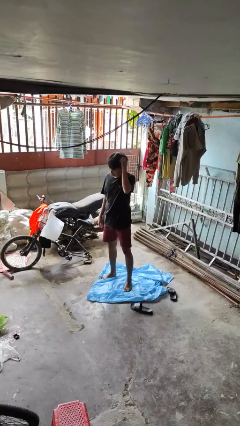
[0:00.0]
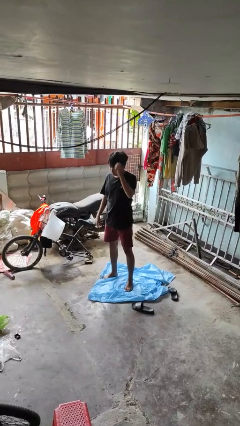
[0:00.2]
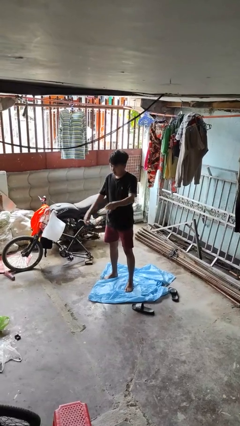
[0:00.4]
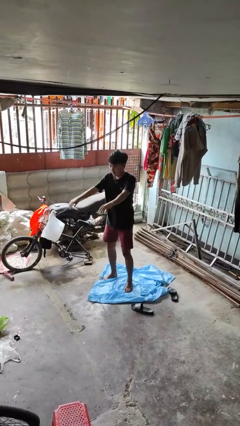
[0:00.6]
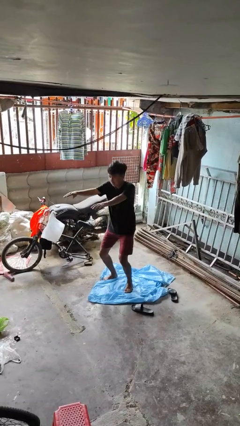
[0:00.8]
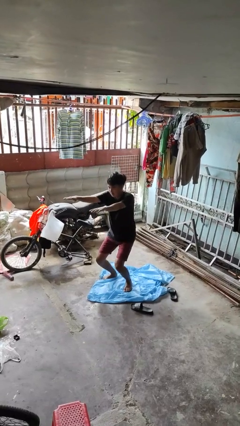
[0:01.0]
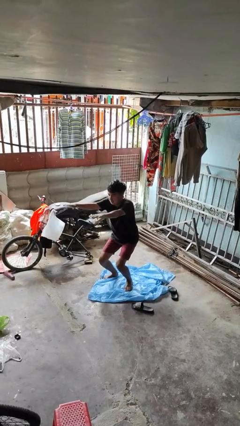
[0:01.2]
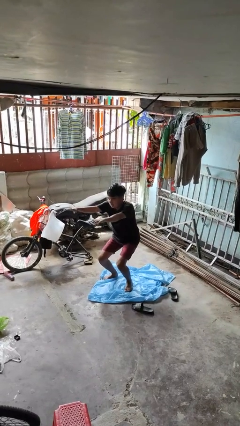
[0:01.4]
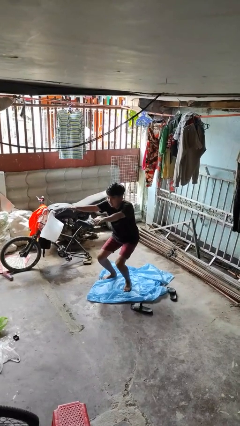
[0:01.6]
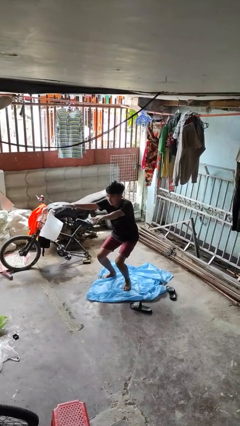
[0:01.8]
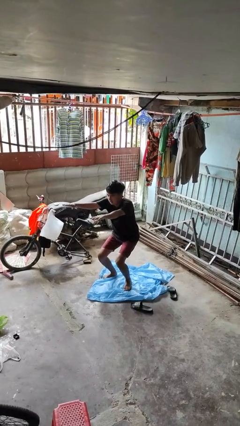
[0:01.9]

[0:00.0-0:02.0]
person squats

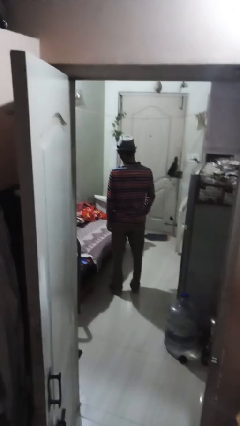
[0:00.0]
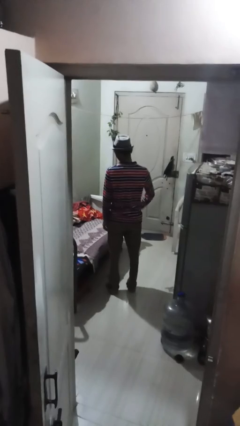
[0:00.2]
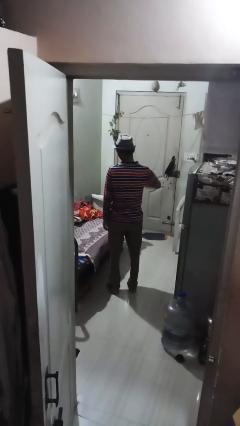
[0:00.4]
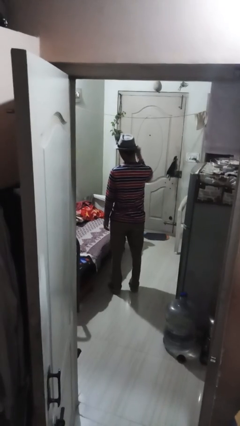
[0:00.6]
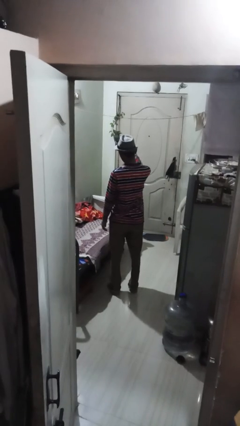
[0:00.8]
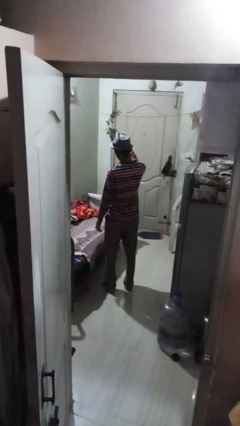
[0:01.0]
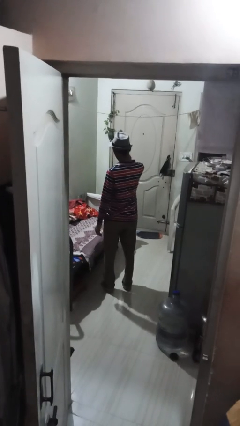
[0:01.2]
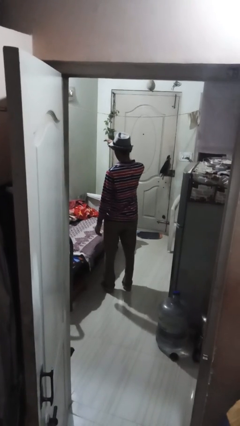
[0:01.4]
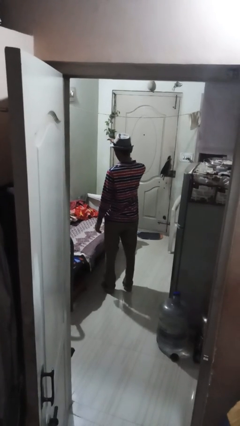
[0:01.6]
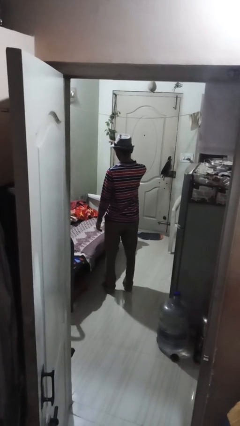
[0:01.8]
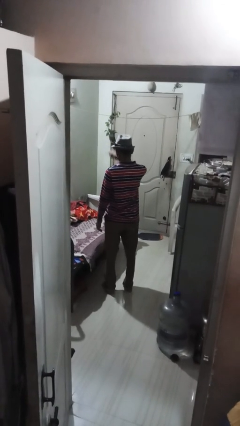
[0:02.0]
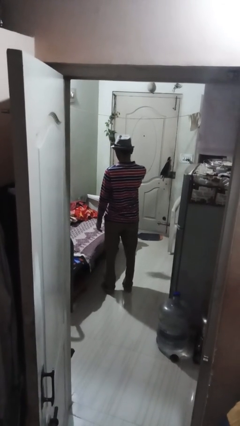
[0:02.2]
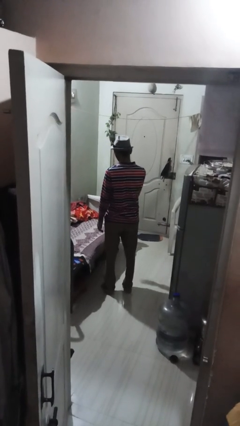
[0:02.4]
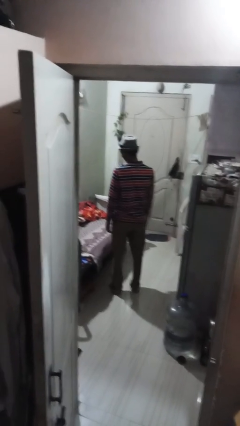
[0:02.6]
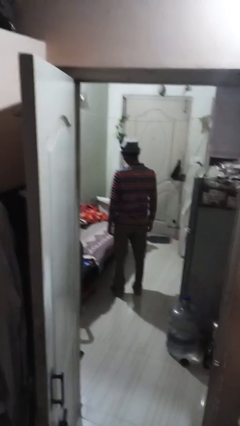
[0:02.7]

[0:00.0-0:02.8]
person snaps fingers

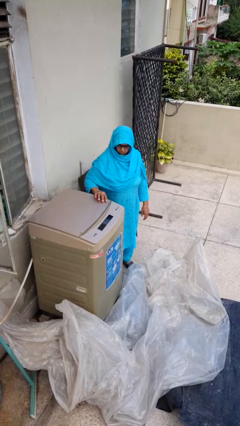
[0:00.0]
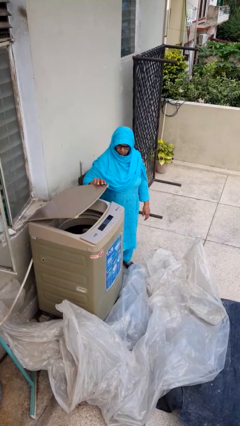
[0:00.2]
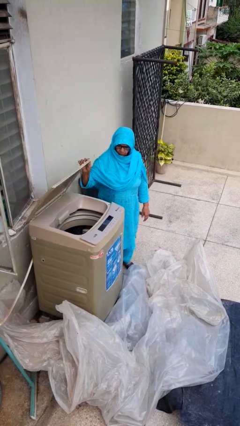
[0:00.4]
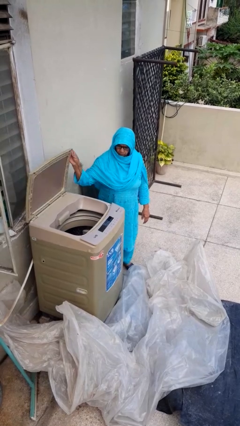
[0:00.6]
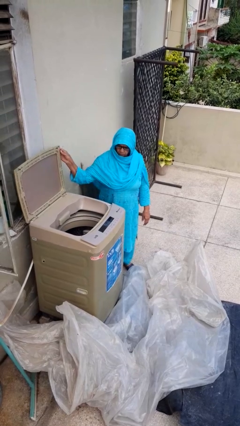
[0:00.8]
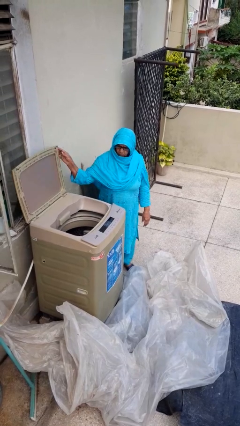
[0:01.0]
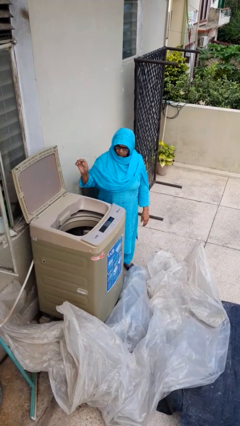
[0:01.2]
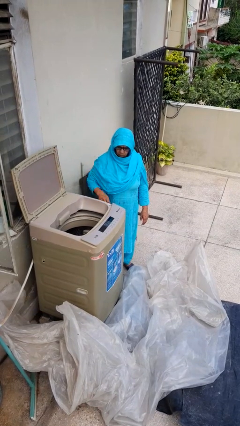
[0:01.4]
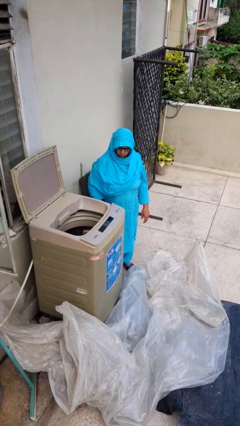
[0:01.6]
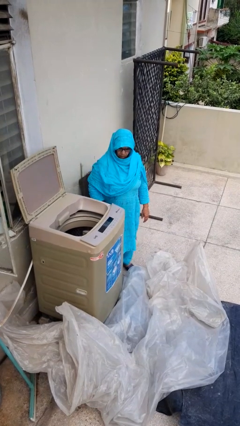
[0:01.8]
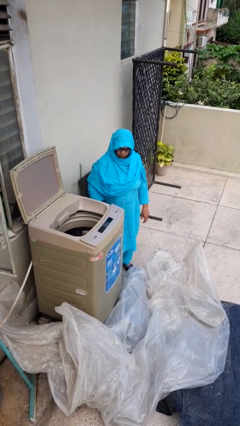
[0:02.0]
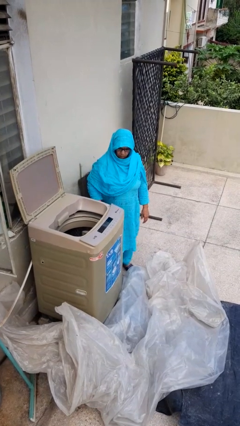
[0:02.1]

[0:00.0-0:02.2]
person opens clothes washer

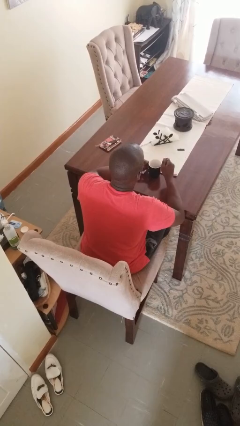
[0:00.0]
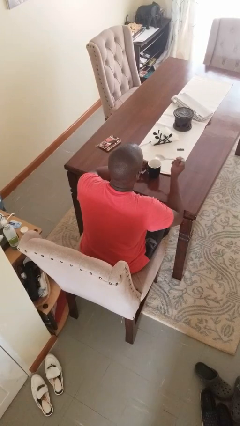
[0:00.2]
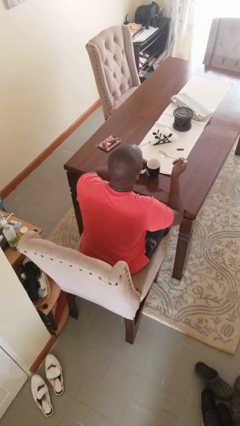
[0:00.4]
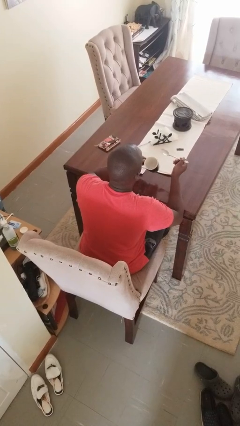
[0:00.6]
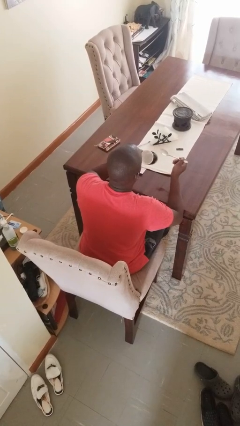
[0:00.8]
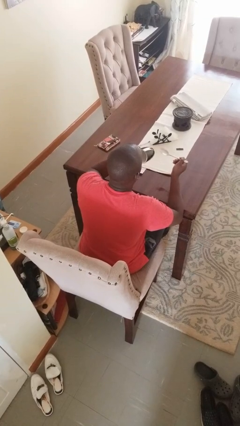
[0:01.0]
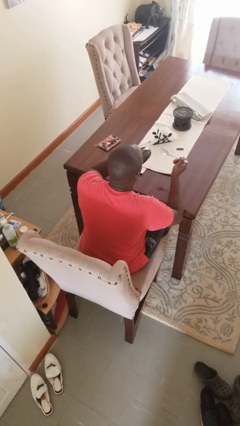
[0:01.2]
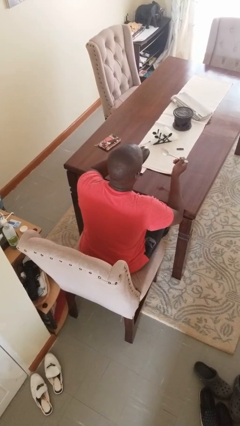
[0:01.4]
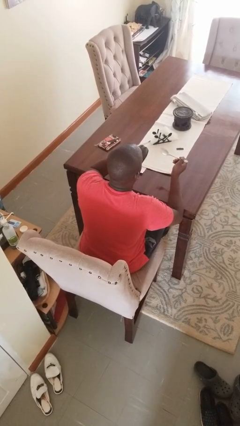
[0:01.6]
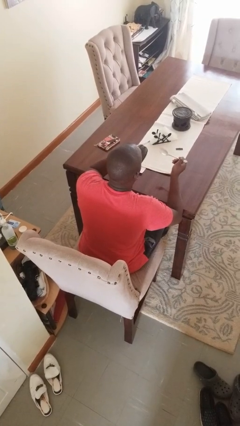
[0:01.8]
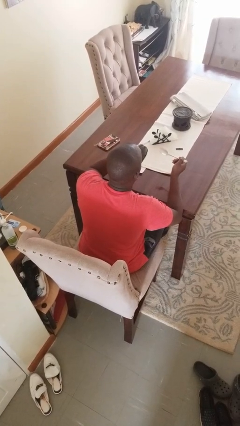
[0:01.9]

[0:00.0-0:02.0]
person drinks from mug

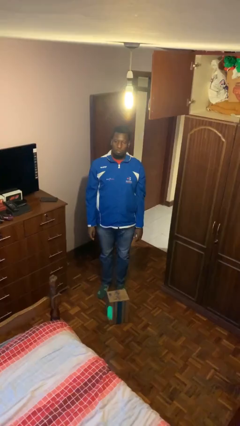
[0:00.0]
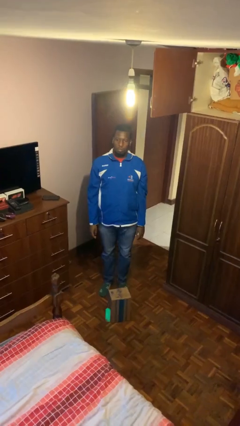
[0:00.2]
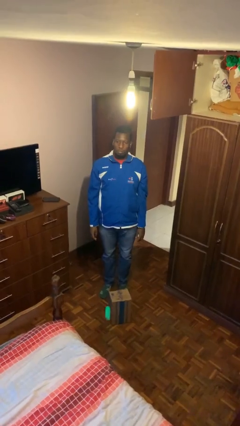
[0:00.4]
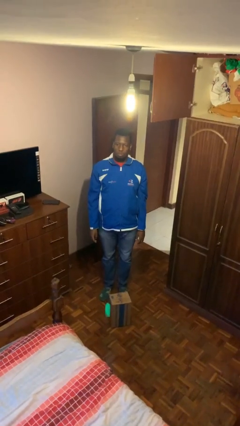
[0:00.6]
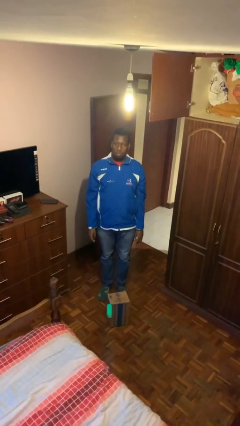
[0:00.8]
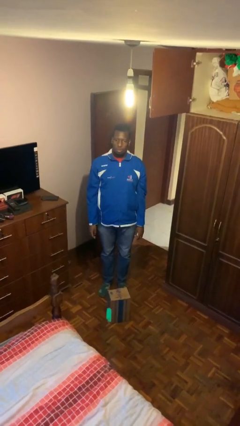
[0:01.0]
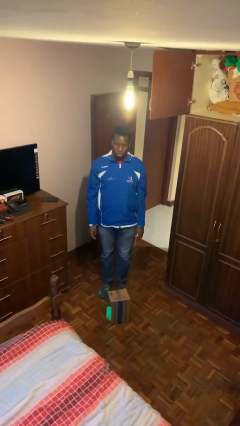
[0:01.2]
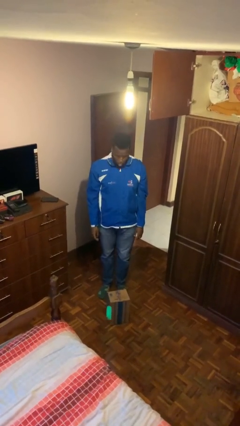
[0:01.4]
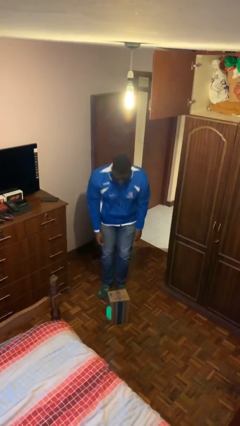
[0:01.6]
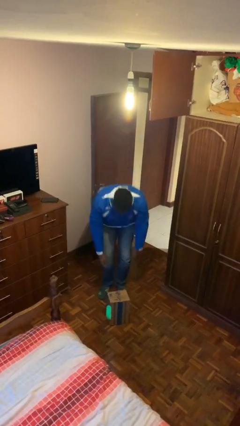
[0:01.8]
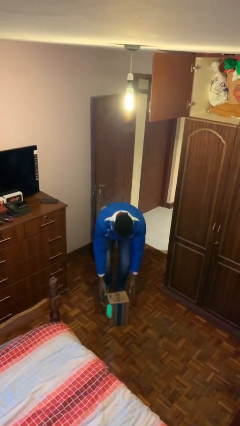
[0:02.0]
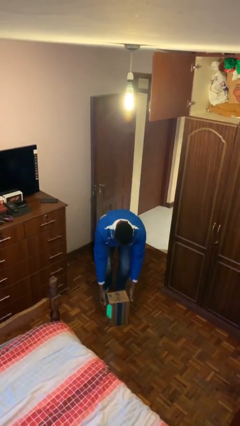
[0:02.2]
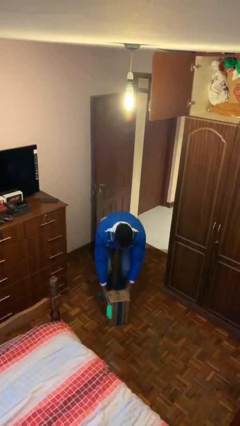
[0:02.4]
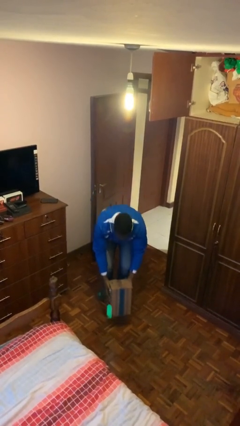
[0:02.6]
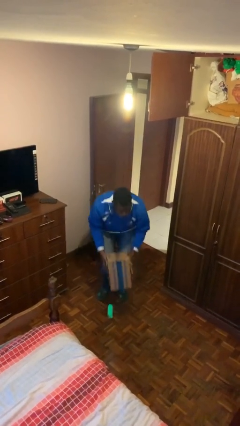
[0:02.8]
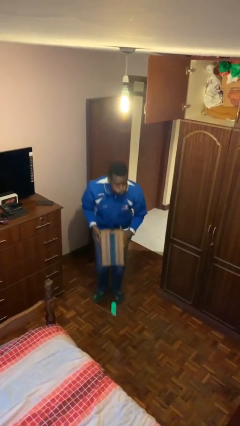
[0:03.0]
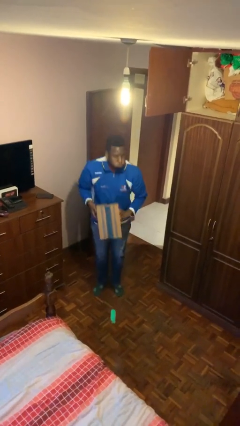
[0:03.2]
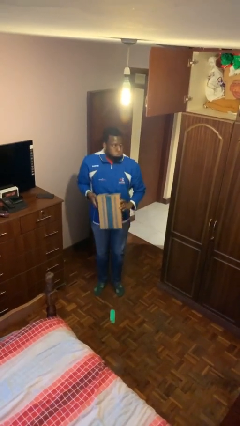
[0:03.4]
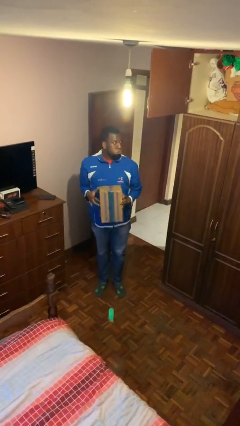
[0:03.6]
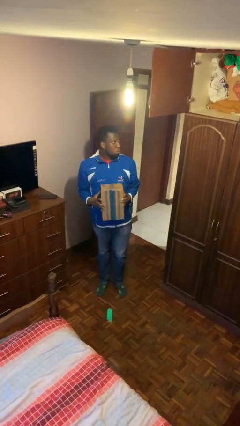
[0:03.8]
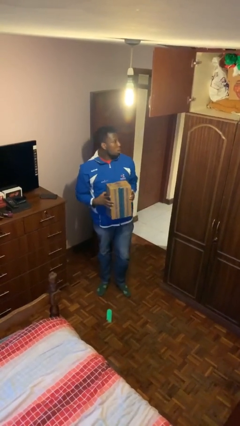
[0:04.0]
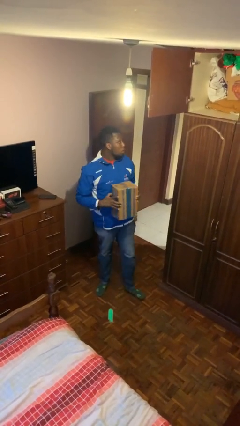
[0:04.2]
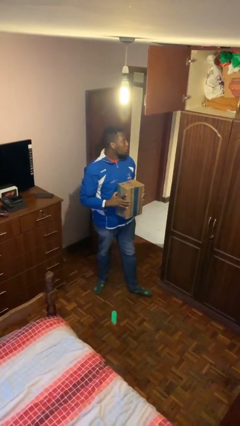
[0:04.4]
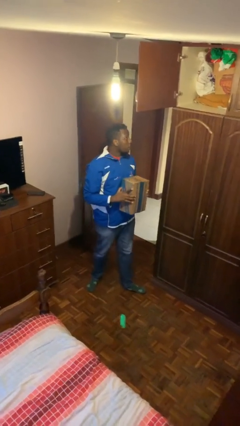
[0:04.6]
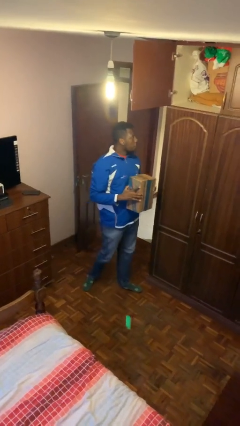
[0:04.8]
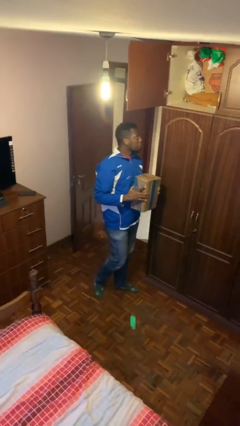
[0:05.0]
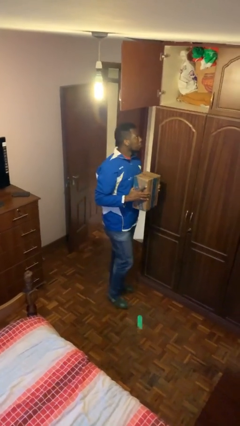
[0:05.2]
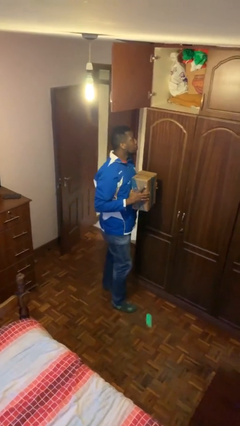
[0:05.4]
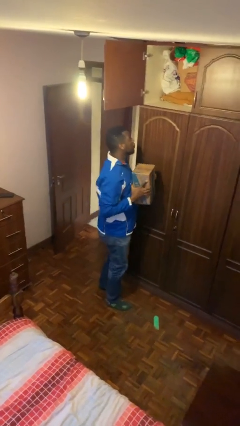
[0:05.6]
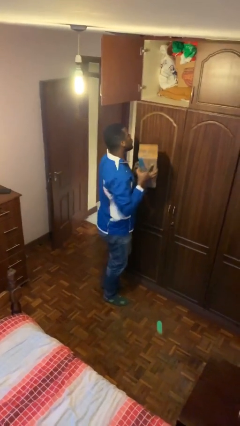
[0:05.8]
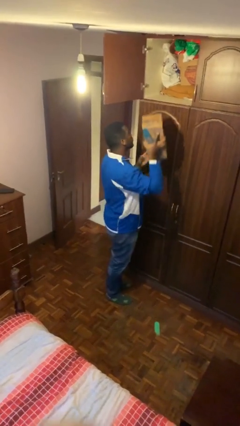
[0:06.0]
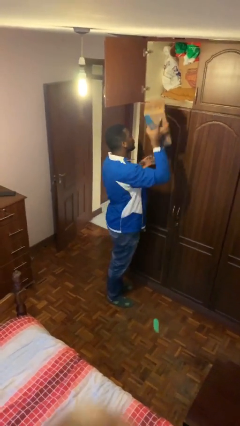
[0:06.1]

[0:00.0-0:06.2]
person picks up object from floor

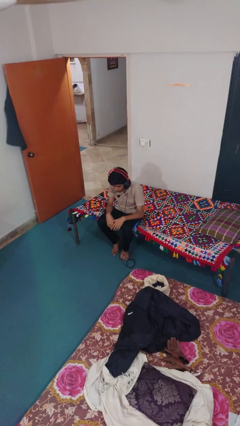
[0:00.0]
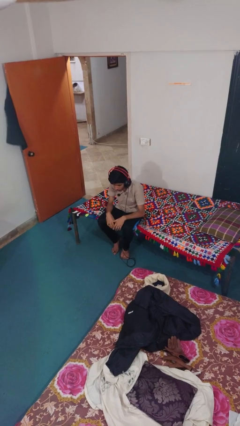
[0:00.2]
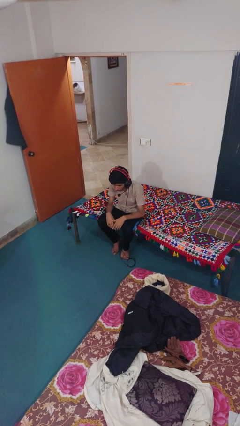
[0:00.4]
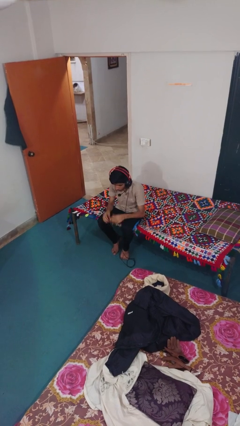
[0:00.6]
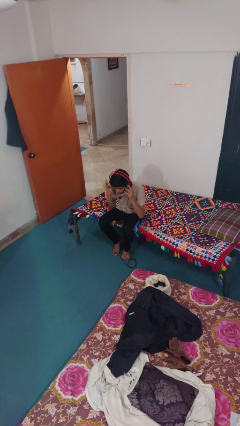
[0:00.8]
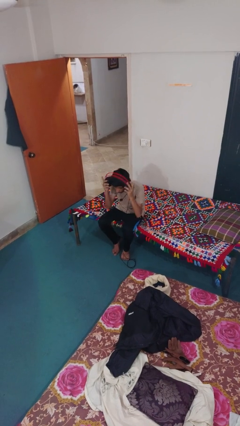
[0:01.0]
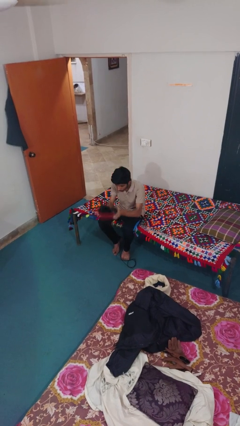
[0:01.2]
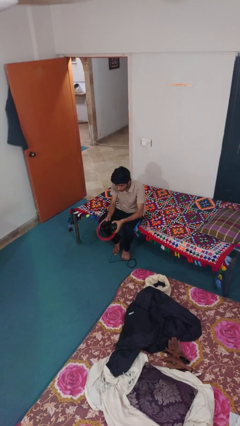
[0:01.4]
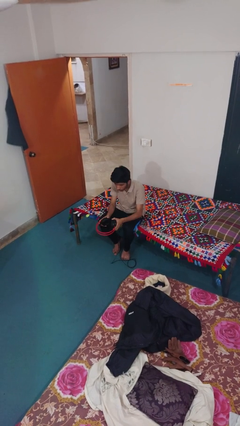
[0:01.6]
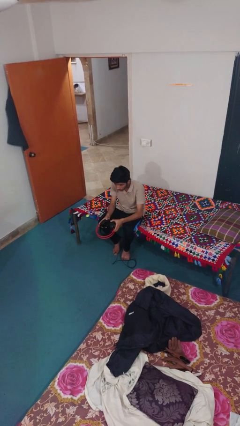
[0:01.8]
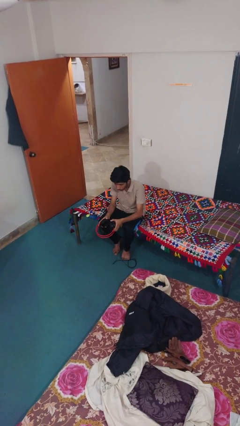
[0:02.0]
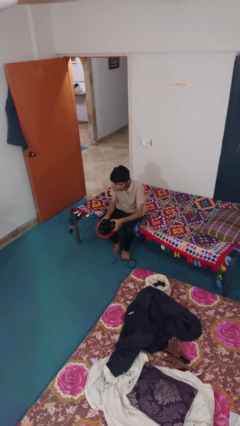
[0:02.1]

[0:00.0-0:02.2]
person takes off headphones

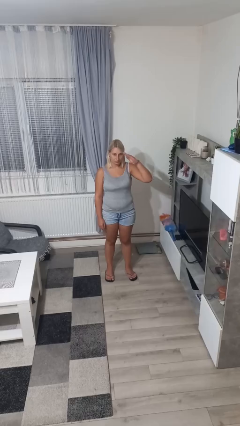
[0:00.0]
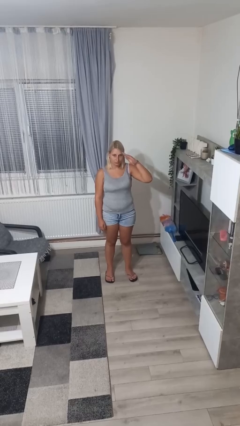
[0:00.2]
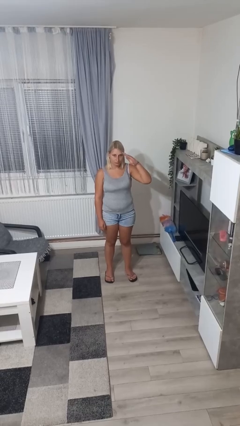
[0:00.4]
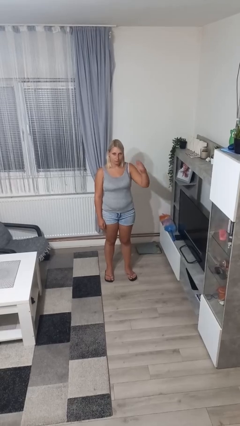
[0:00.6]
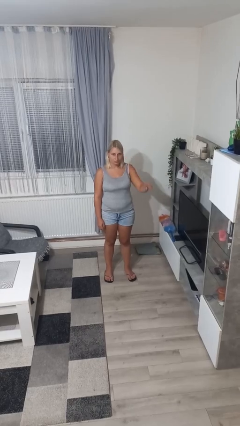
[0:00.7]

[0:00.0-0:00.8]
person salutes
